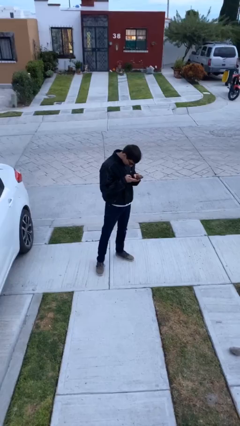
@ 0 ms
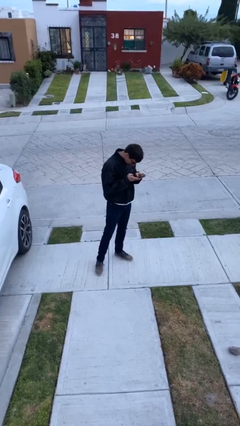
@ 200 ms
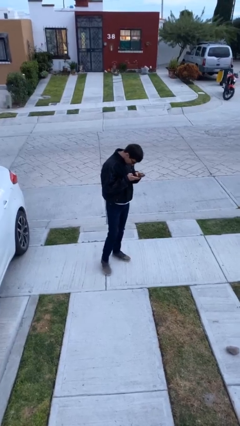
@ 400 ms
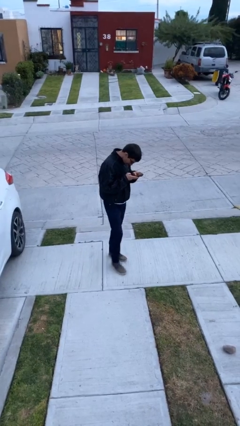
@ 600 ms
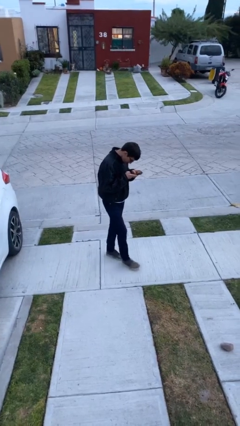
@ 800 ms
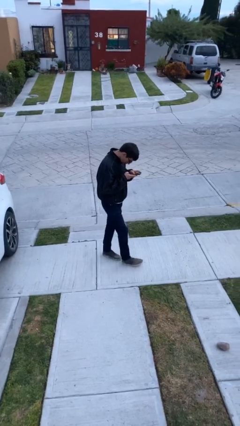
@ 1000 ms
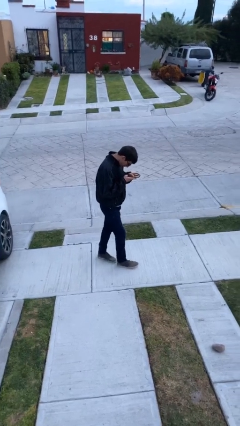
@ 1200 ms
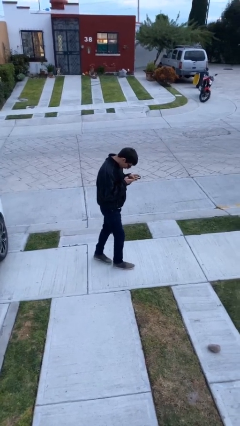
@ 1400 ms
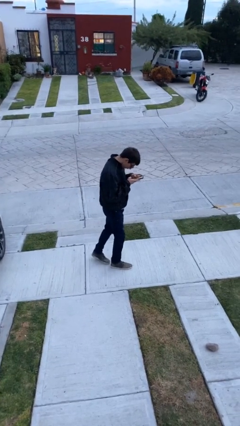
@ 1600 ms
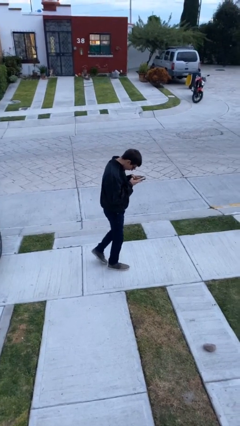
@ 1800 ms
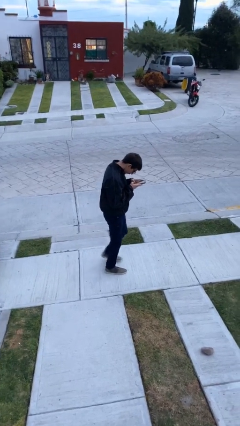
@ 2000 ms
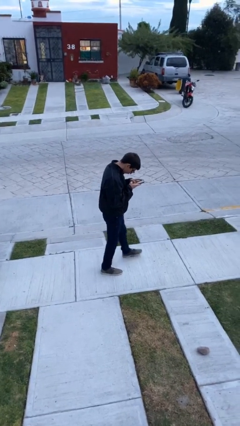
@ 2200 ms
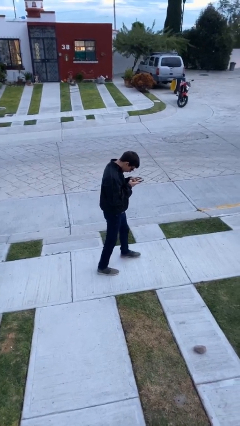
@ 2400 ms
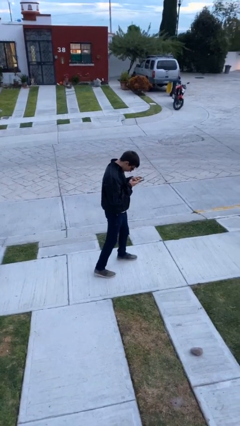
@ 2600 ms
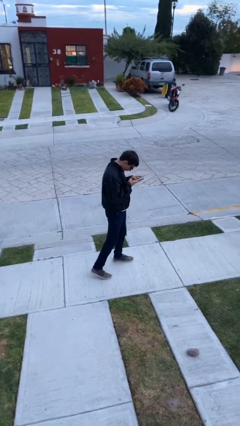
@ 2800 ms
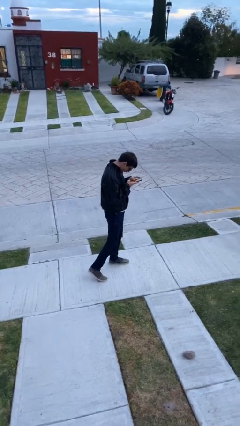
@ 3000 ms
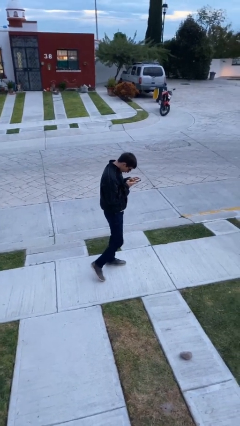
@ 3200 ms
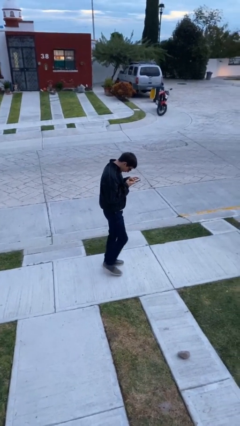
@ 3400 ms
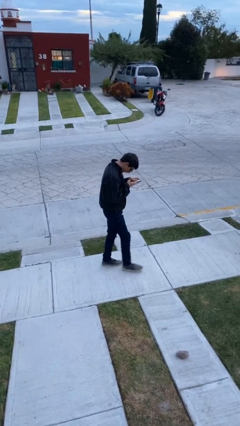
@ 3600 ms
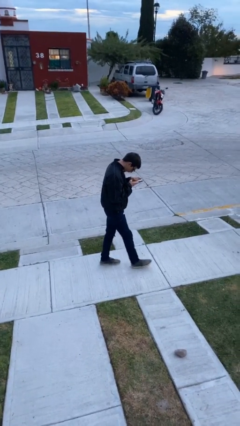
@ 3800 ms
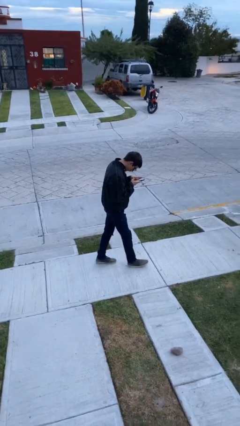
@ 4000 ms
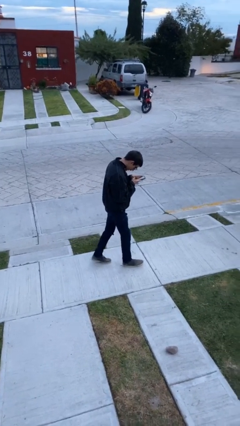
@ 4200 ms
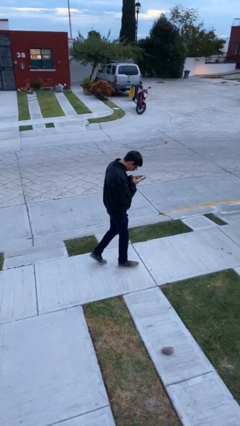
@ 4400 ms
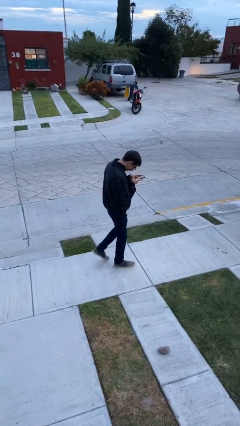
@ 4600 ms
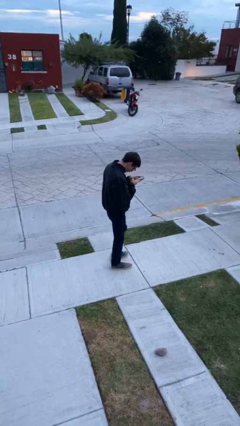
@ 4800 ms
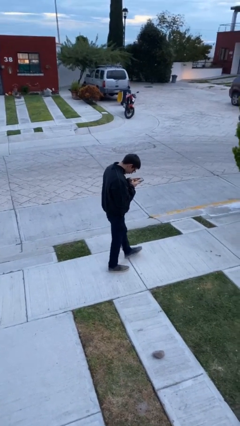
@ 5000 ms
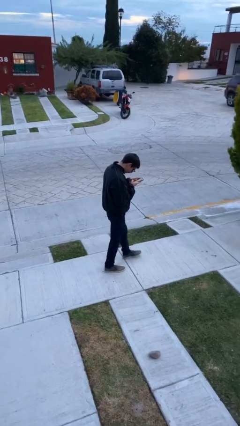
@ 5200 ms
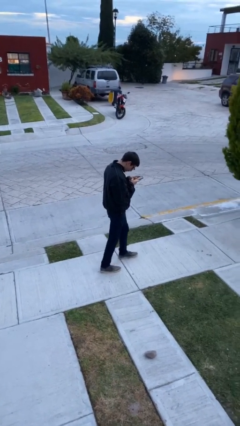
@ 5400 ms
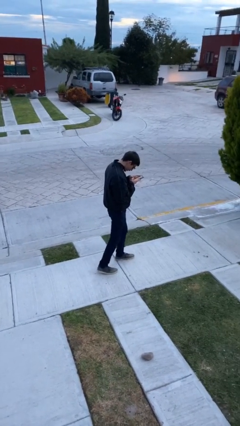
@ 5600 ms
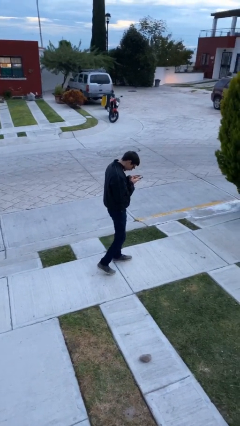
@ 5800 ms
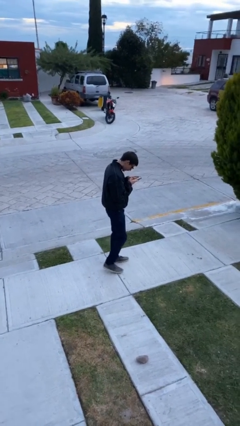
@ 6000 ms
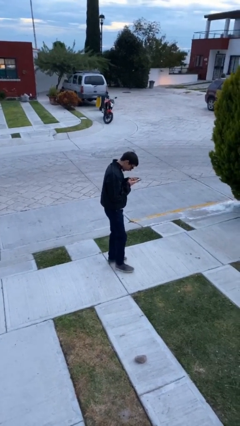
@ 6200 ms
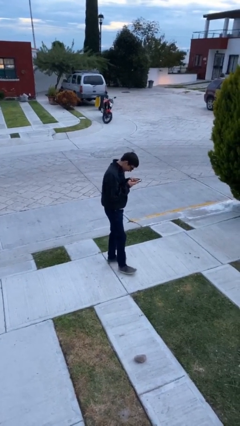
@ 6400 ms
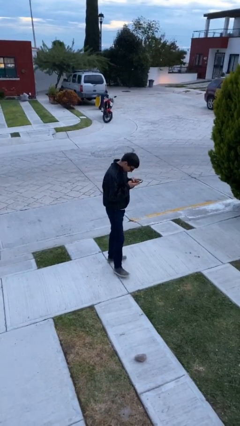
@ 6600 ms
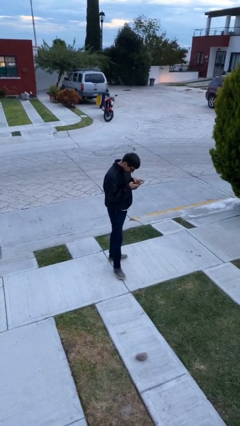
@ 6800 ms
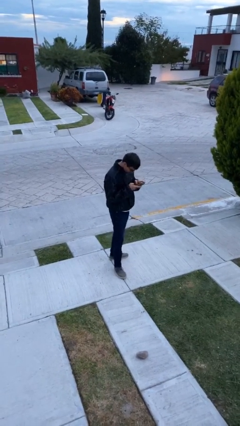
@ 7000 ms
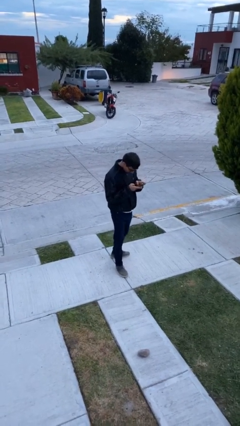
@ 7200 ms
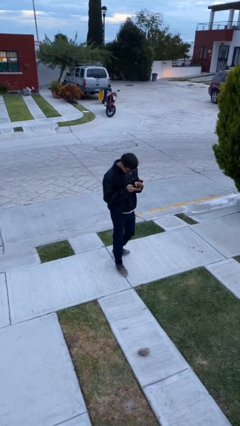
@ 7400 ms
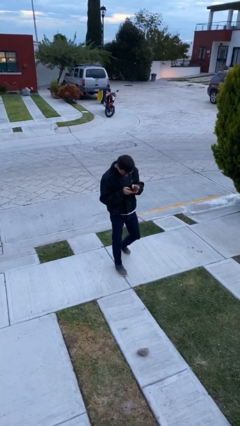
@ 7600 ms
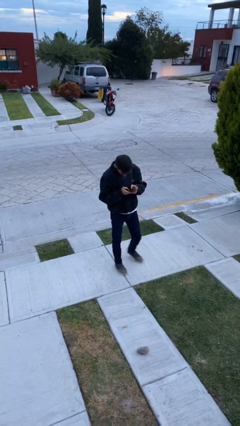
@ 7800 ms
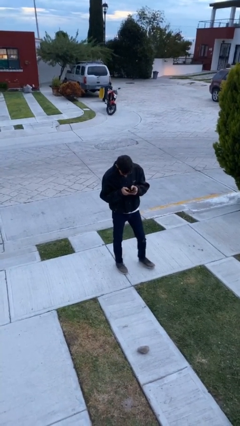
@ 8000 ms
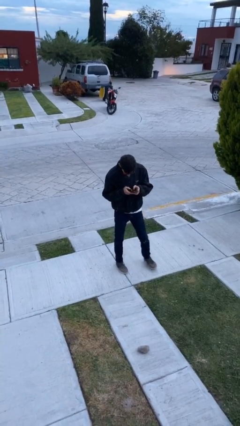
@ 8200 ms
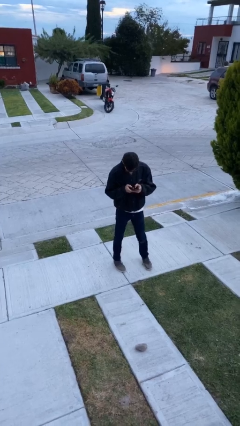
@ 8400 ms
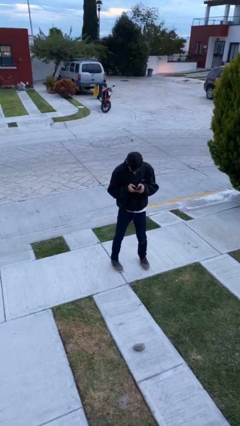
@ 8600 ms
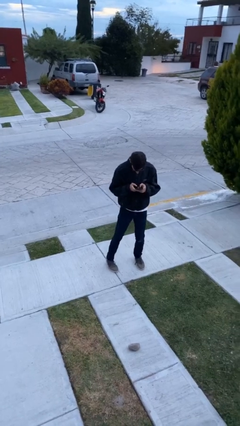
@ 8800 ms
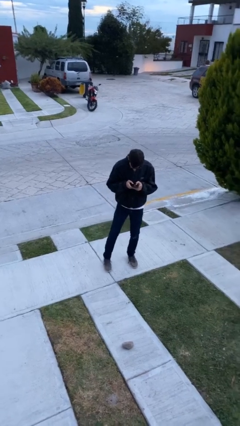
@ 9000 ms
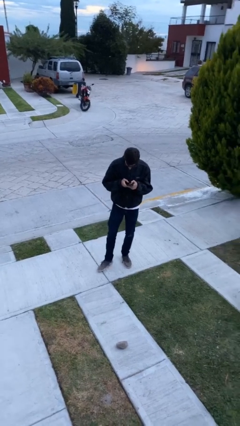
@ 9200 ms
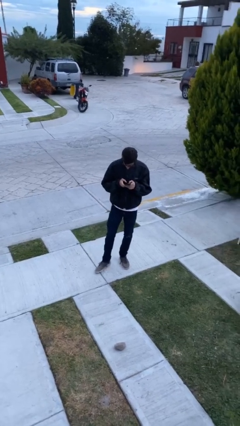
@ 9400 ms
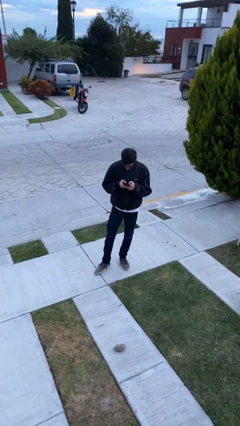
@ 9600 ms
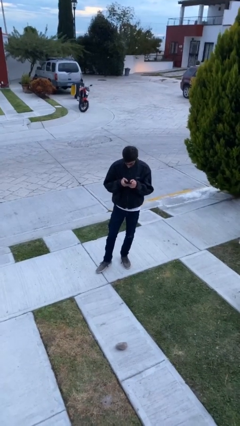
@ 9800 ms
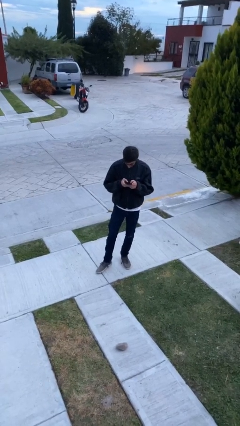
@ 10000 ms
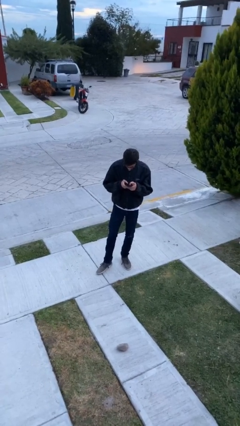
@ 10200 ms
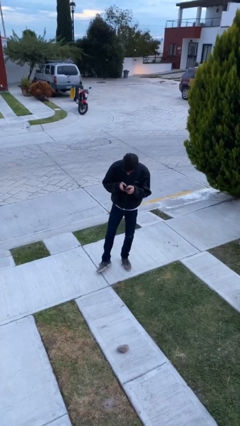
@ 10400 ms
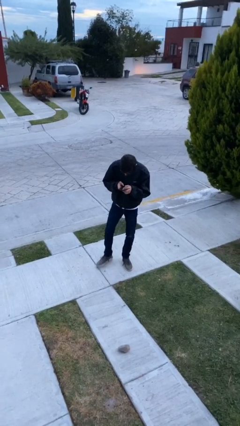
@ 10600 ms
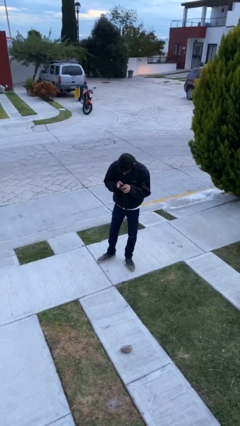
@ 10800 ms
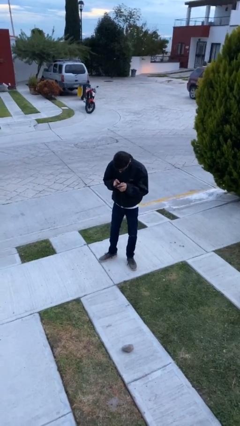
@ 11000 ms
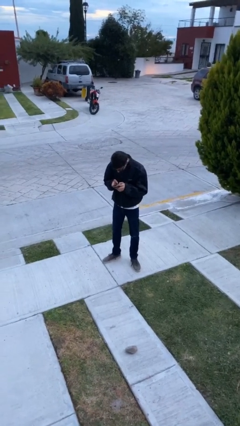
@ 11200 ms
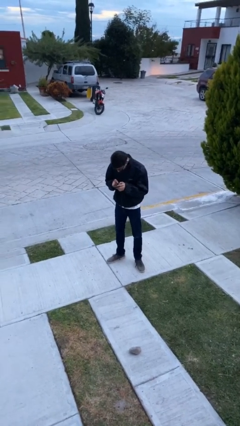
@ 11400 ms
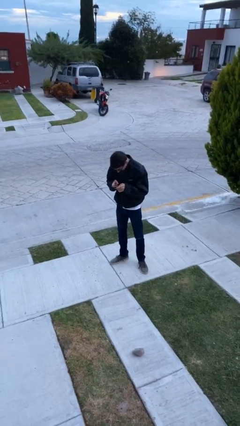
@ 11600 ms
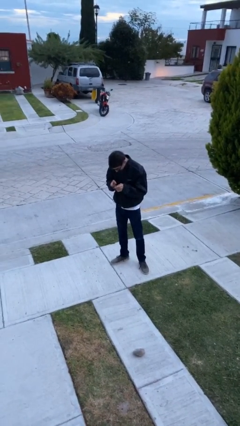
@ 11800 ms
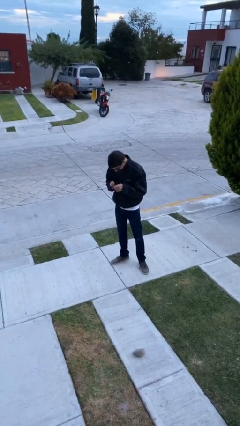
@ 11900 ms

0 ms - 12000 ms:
person texts on phone

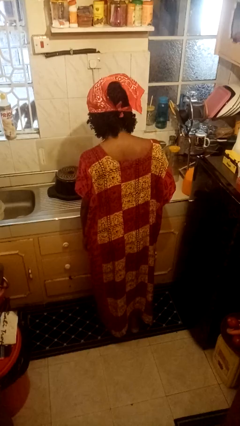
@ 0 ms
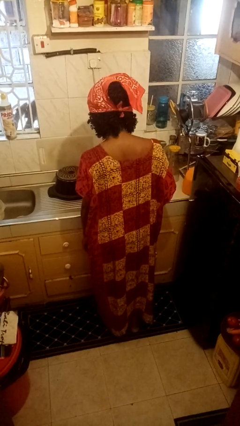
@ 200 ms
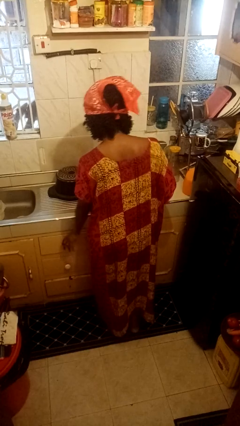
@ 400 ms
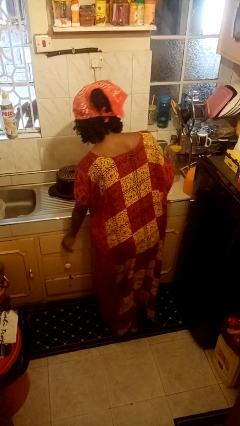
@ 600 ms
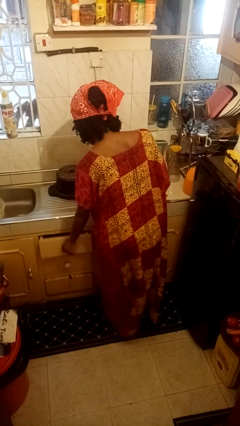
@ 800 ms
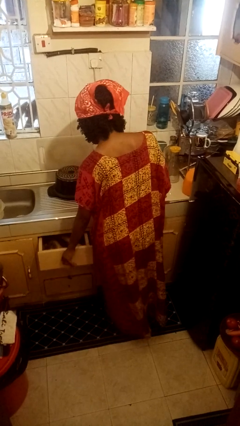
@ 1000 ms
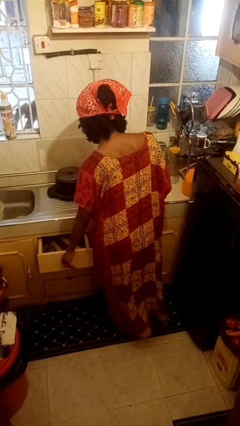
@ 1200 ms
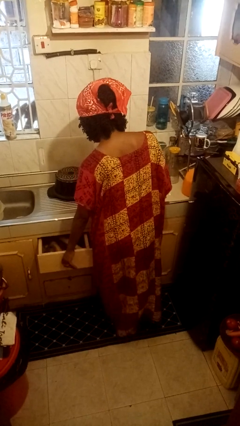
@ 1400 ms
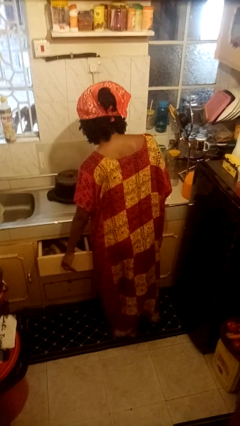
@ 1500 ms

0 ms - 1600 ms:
person opens kitchen drawer

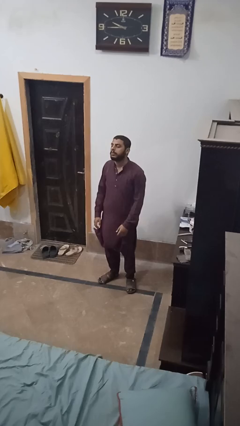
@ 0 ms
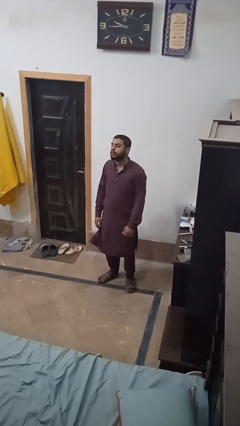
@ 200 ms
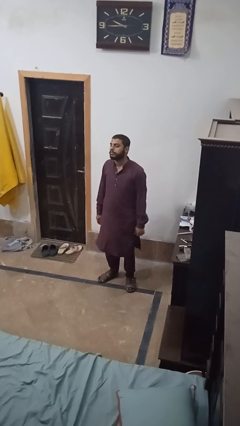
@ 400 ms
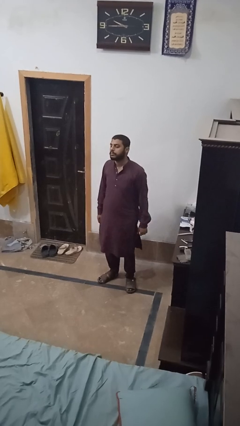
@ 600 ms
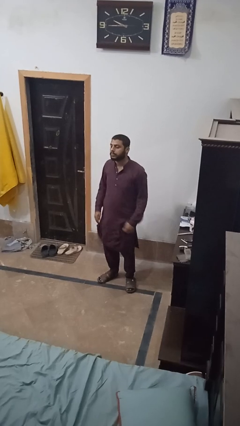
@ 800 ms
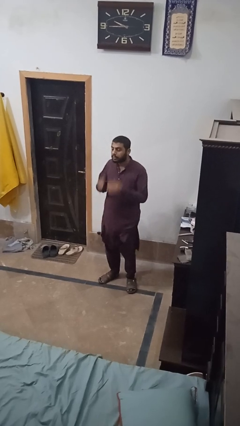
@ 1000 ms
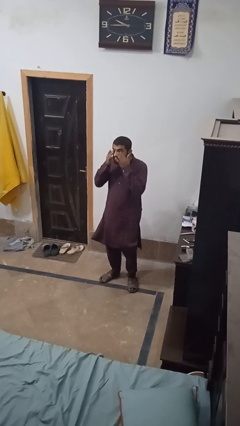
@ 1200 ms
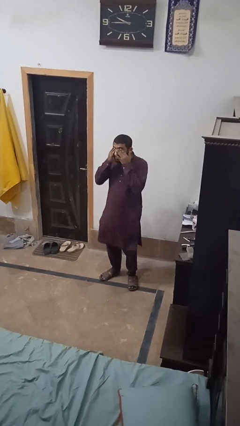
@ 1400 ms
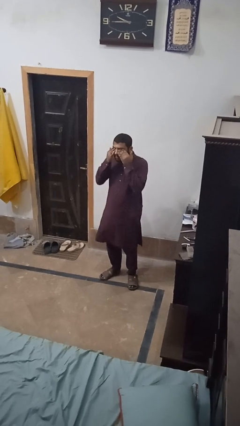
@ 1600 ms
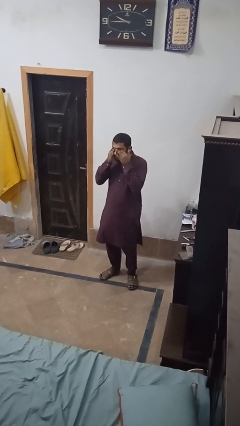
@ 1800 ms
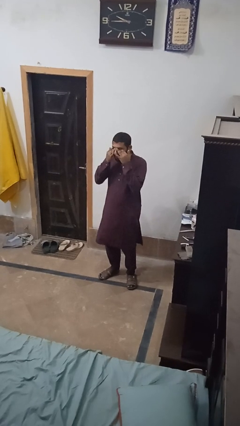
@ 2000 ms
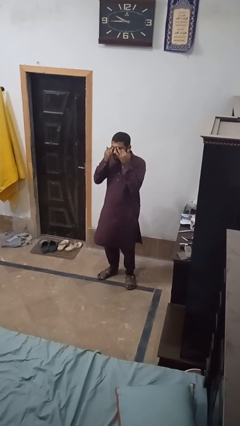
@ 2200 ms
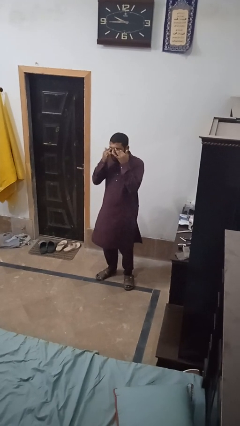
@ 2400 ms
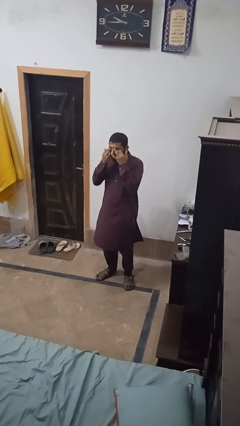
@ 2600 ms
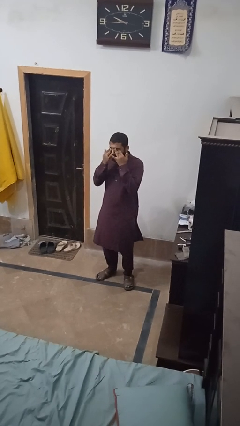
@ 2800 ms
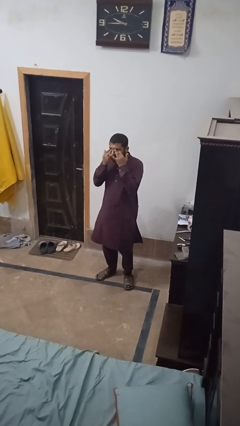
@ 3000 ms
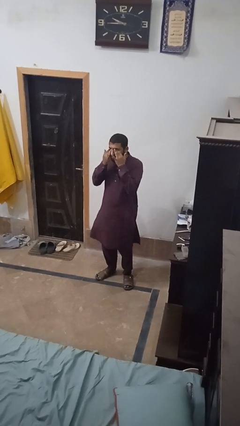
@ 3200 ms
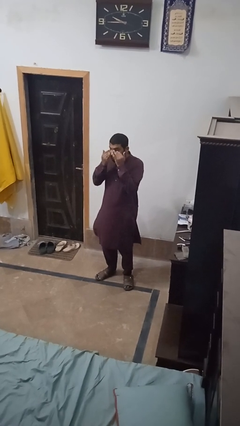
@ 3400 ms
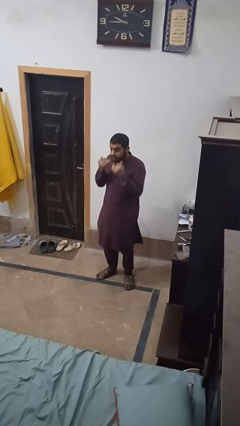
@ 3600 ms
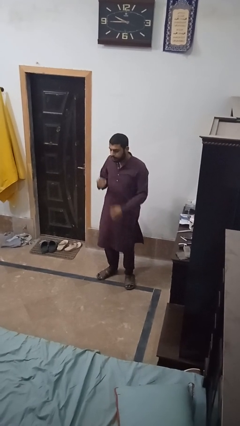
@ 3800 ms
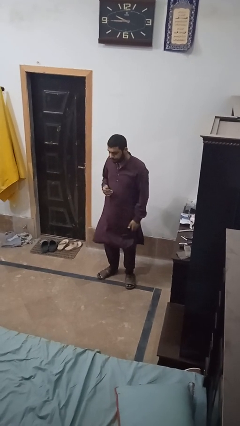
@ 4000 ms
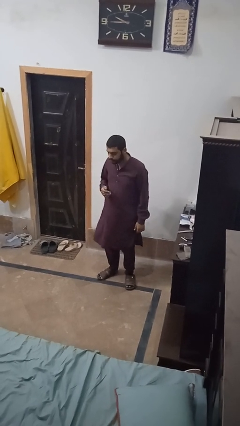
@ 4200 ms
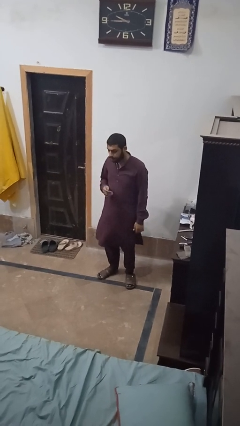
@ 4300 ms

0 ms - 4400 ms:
person rubs eyes
